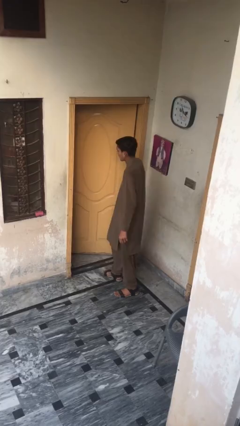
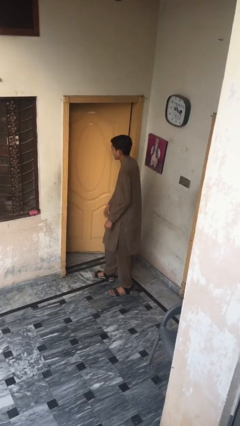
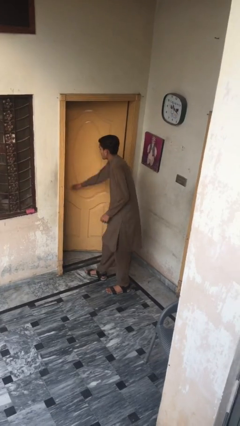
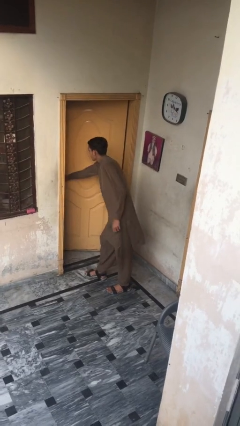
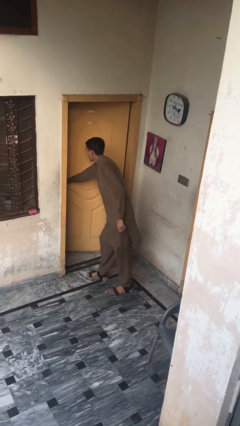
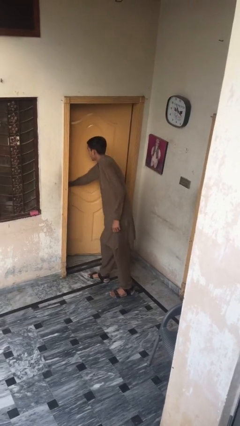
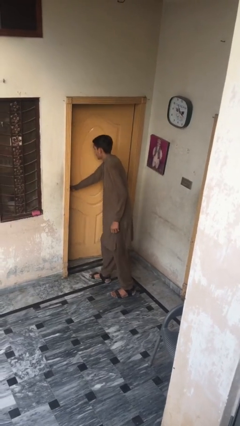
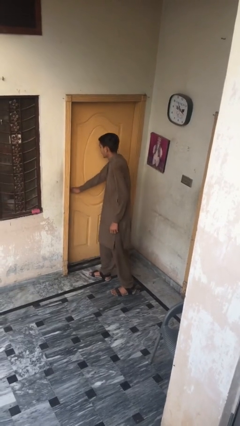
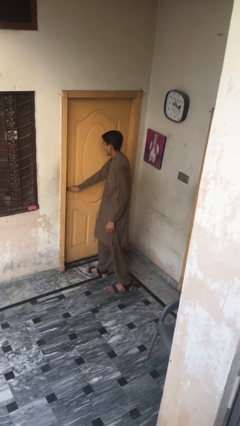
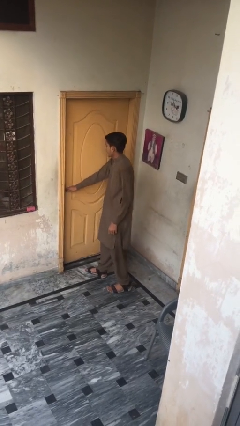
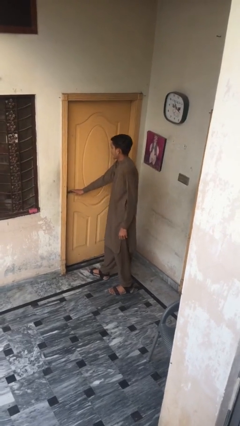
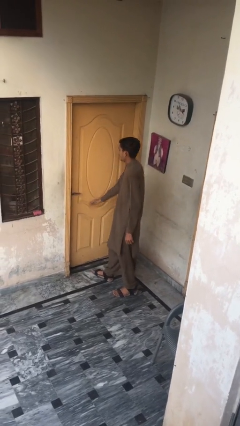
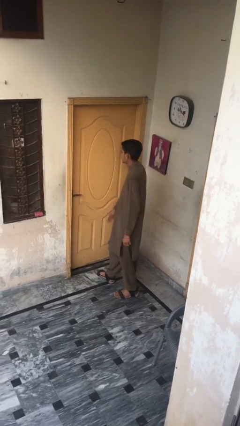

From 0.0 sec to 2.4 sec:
person closes facility door

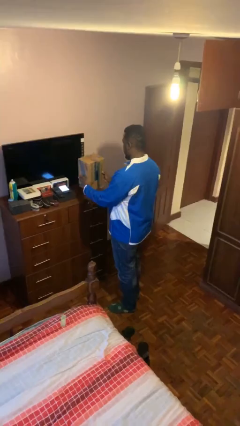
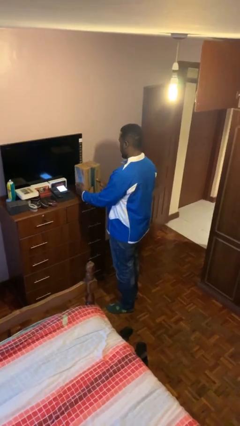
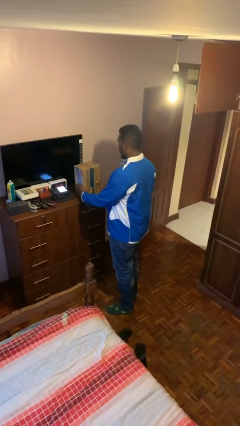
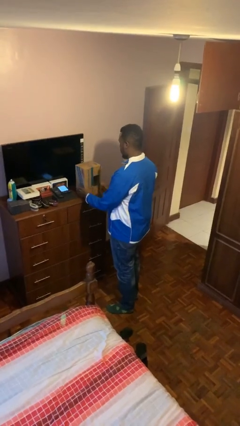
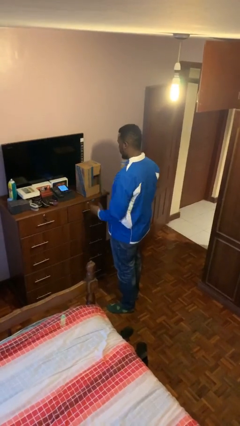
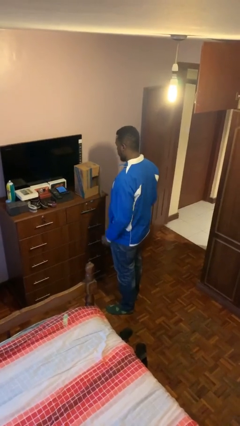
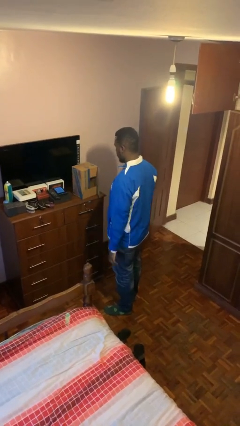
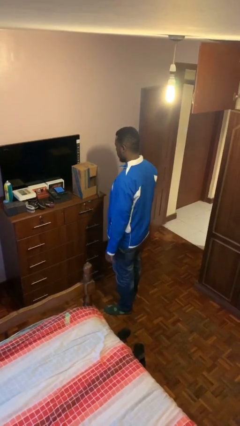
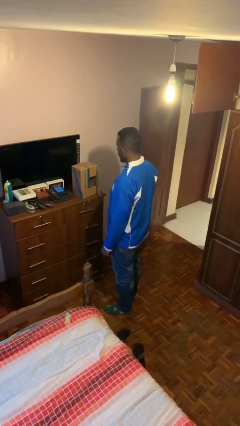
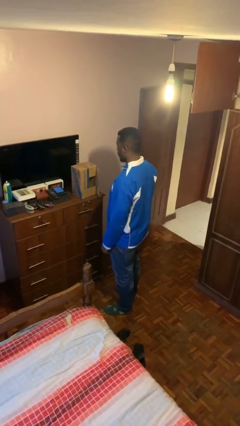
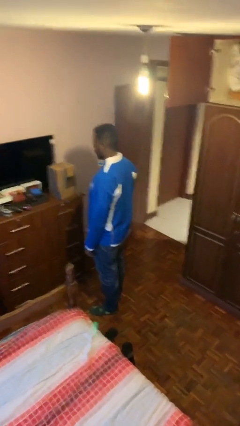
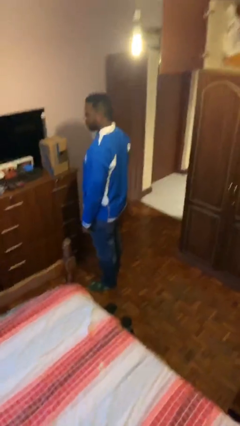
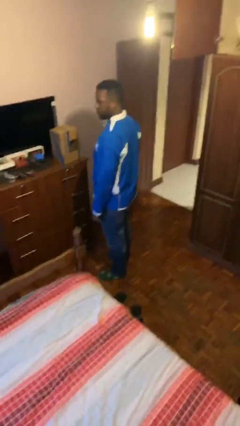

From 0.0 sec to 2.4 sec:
person puts down object on table

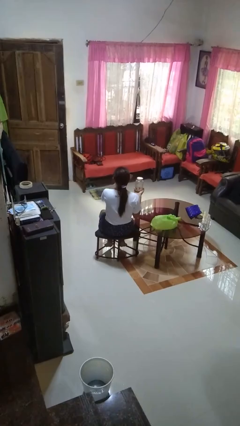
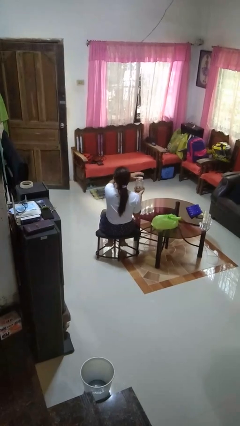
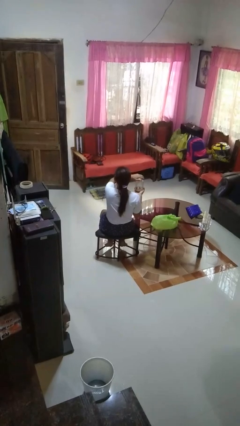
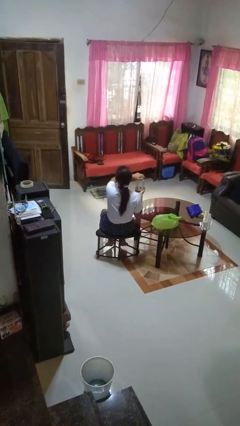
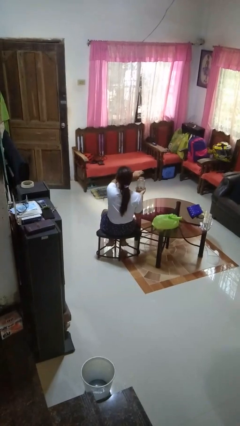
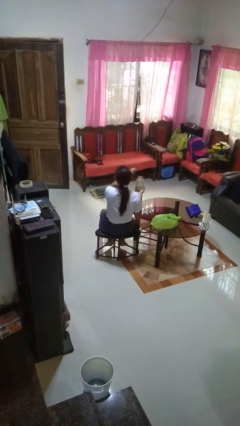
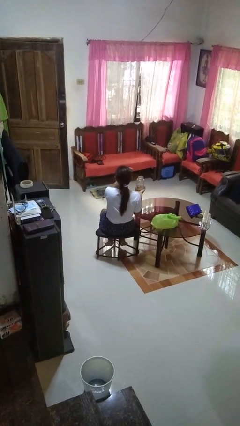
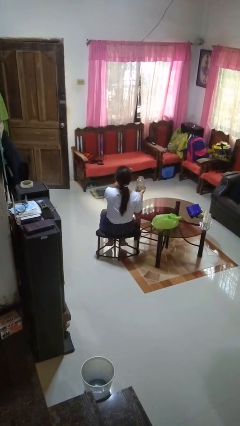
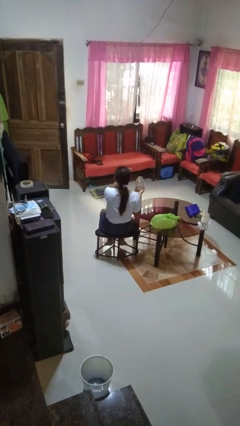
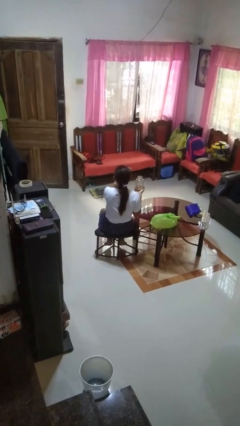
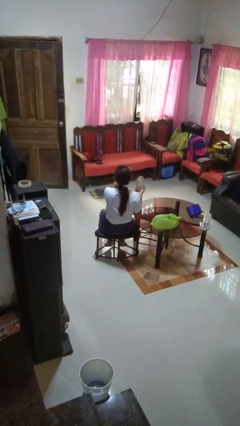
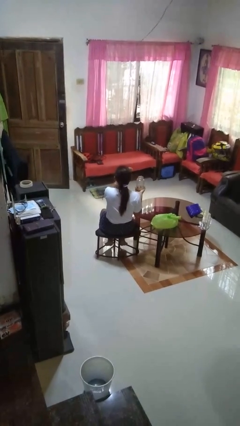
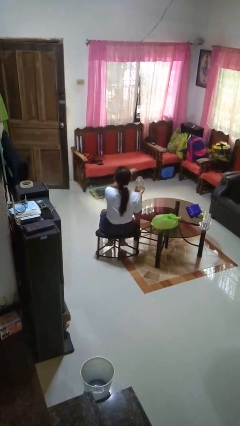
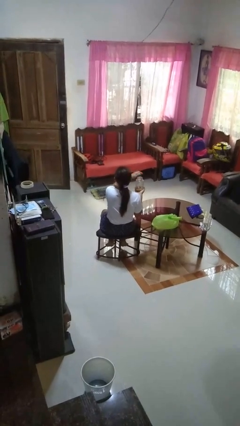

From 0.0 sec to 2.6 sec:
person opens jar

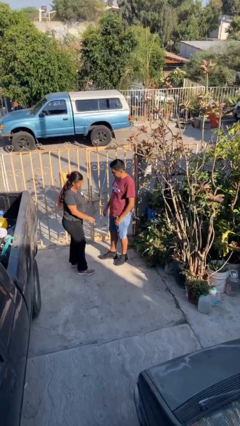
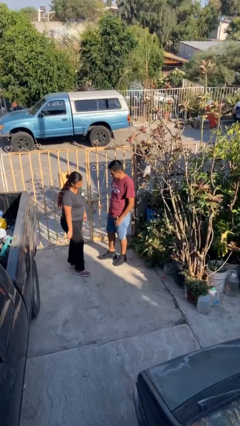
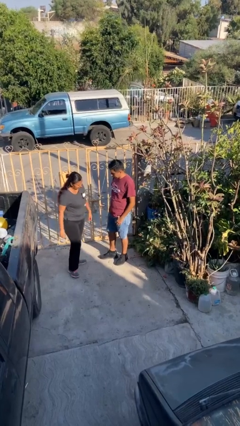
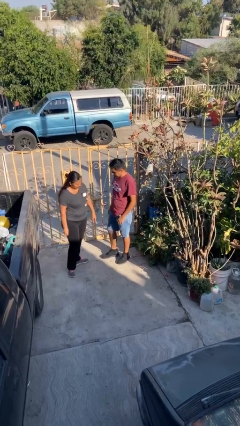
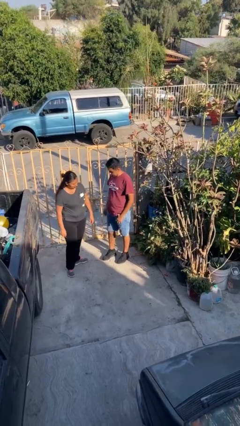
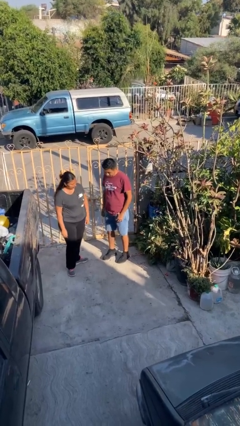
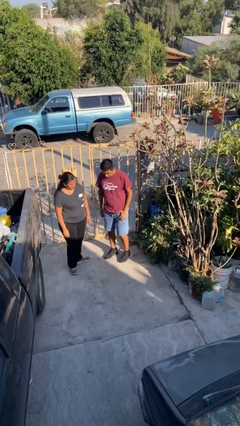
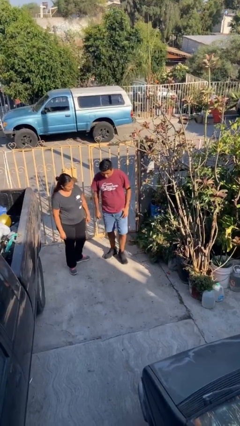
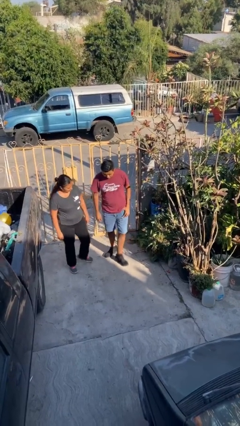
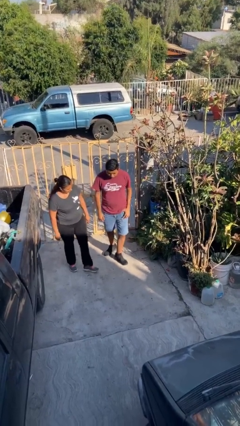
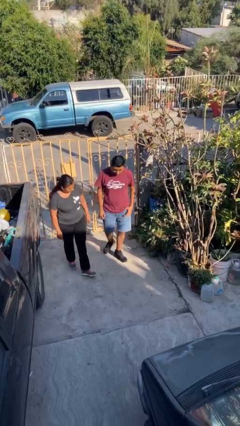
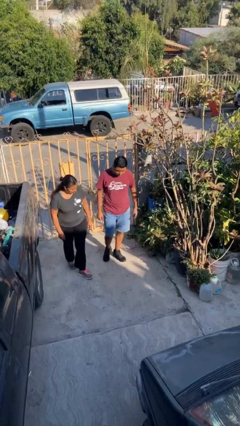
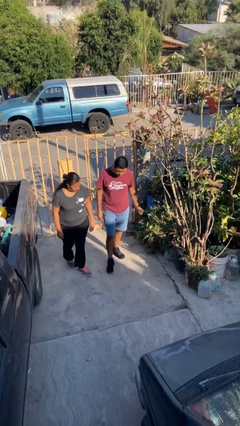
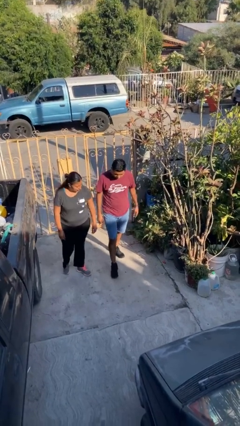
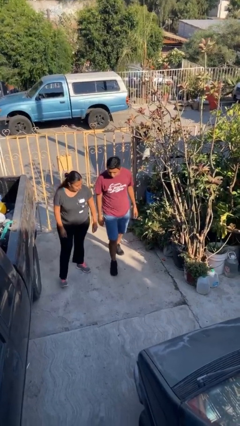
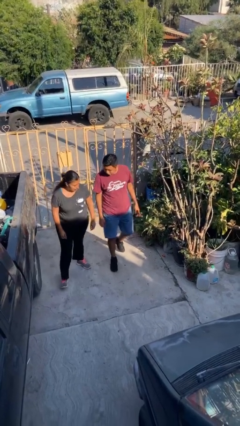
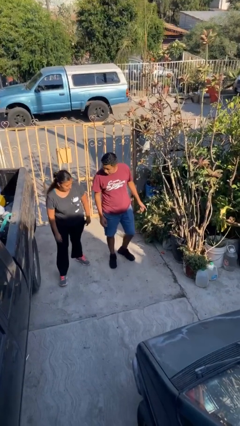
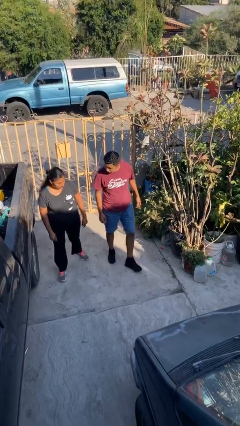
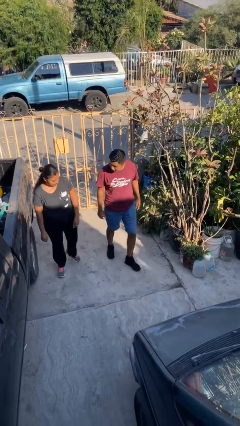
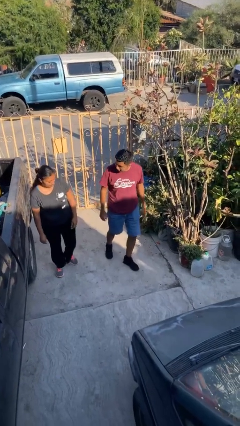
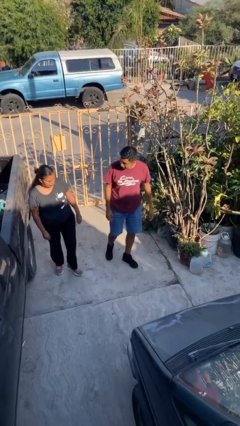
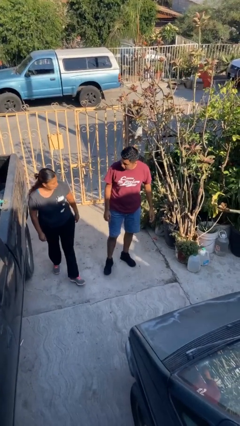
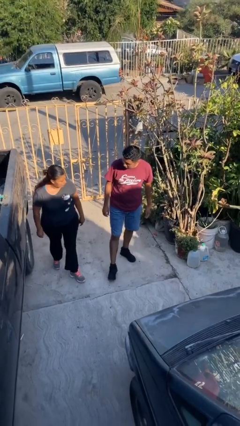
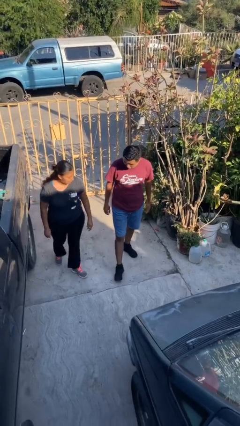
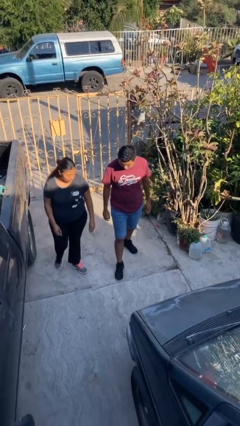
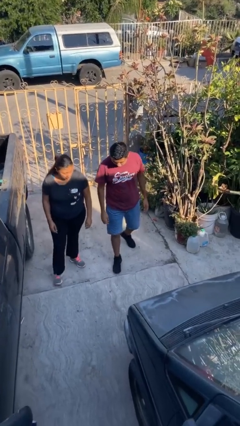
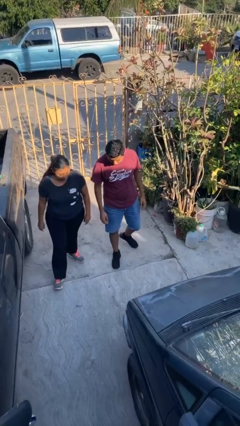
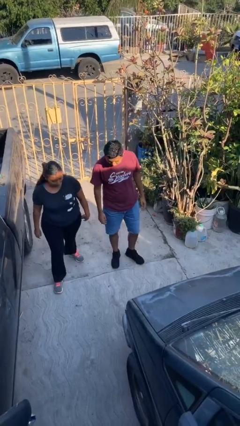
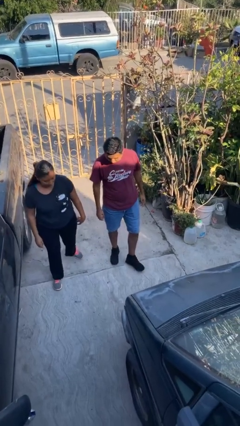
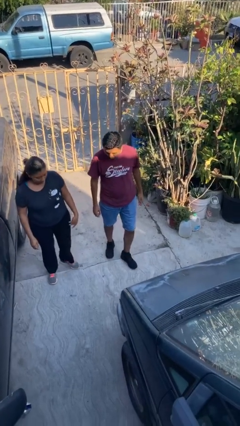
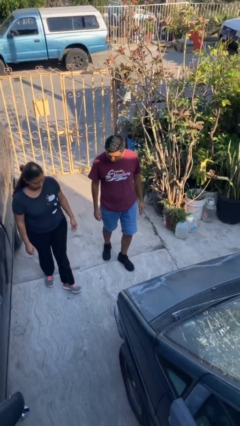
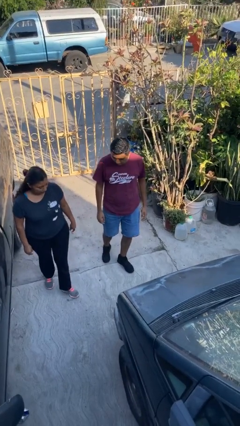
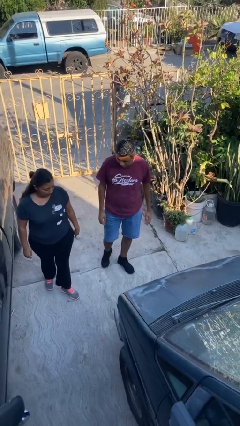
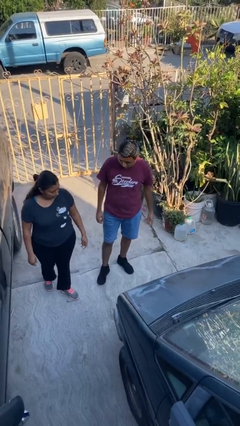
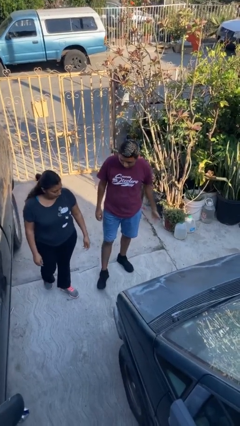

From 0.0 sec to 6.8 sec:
person talks to person

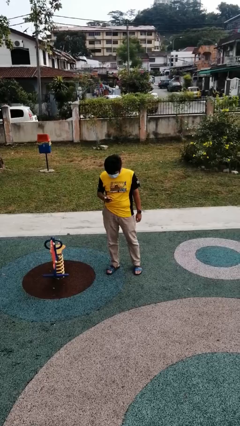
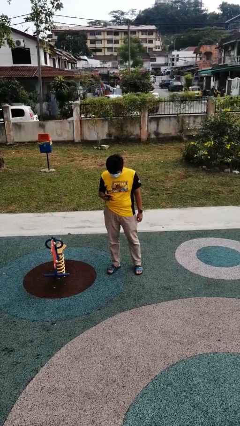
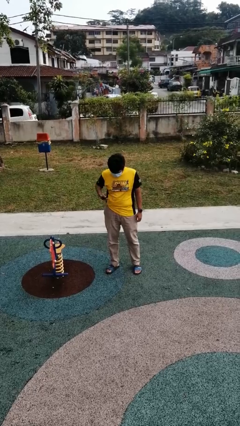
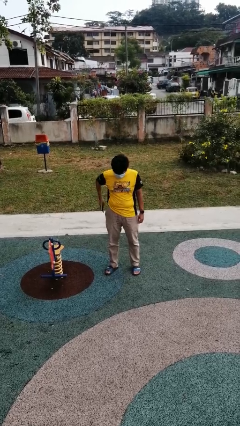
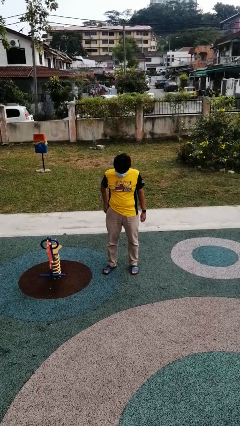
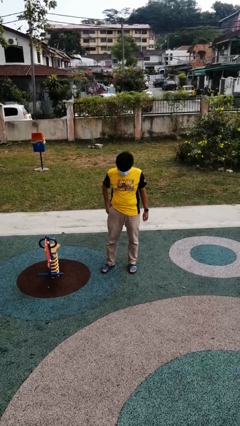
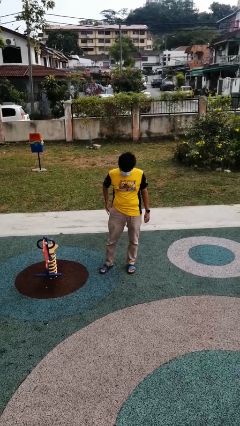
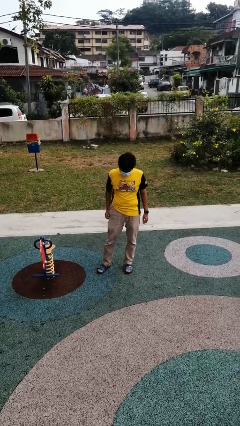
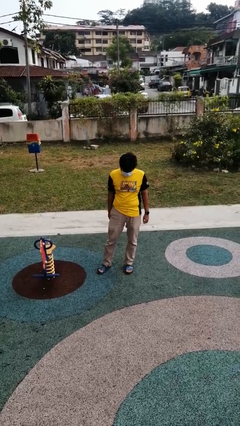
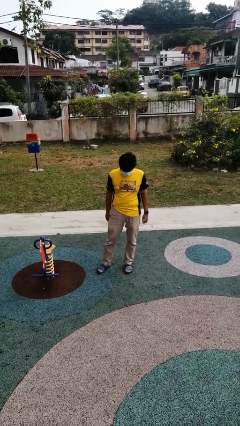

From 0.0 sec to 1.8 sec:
person puts phone into pocket

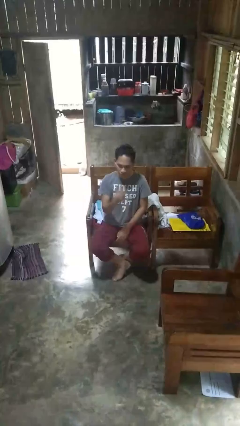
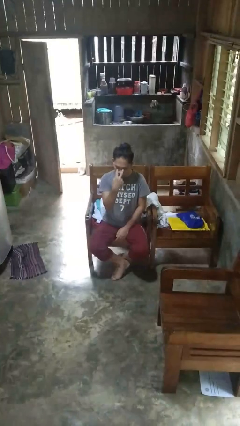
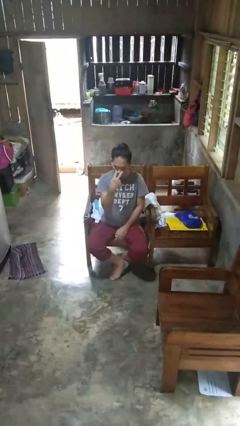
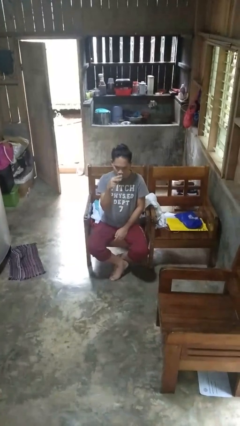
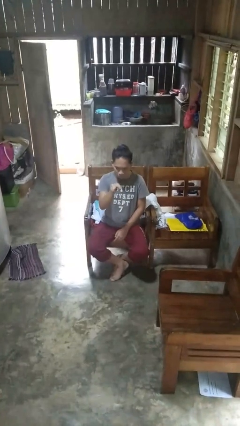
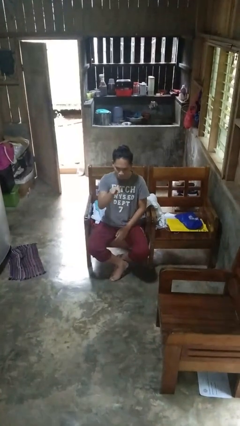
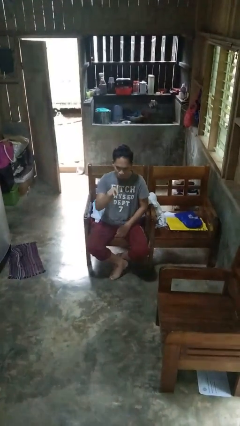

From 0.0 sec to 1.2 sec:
person gestures watch closely

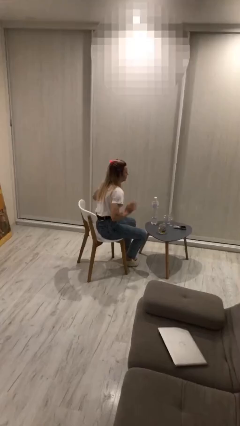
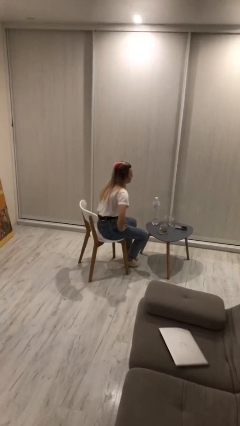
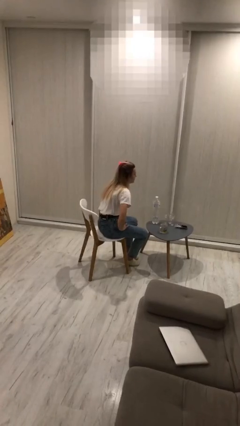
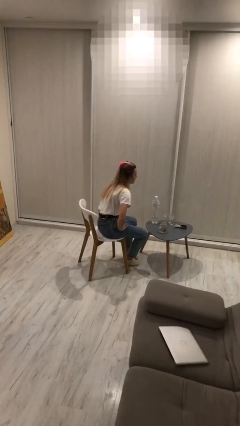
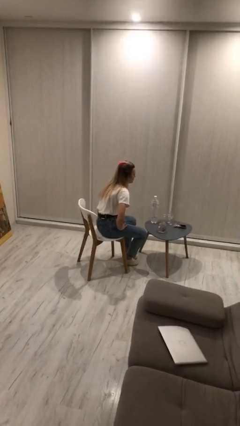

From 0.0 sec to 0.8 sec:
person slaps hands on thighs
